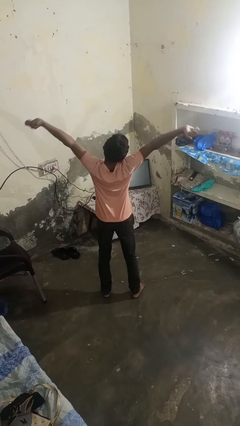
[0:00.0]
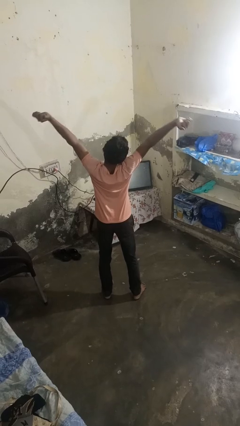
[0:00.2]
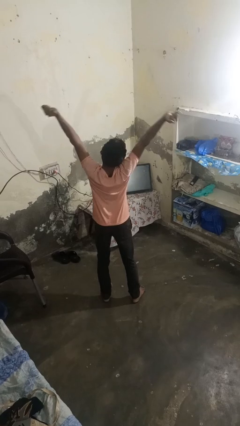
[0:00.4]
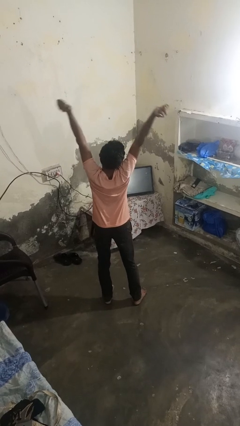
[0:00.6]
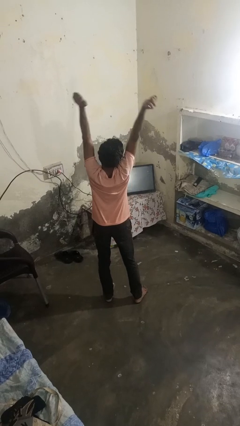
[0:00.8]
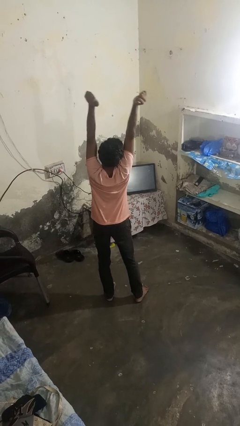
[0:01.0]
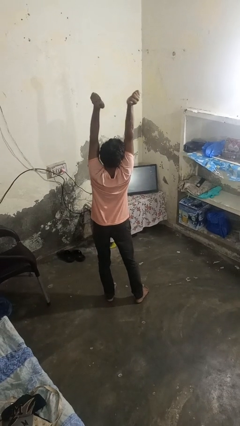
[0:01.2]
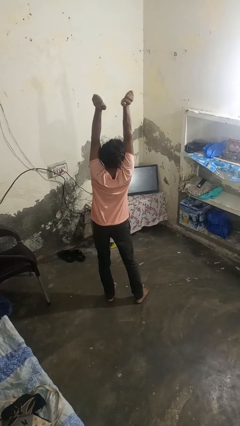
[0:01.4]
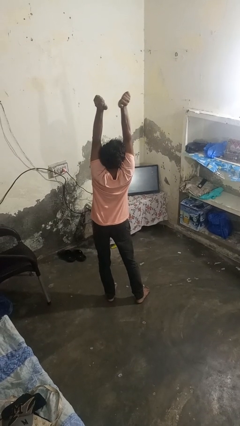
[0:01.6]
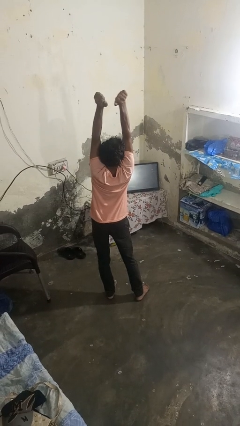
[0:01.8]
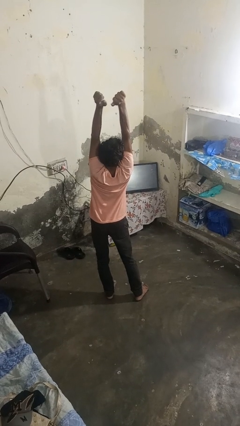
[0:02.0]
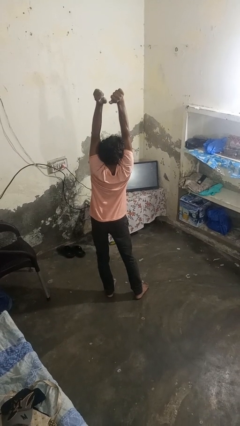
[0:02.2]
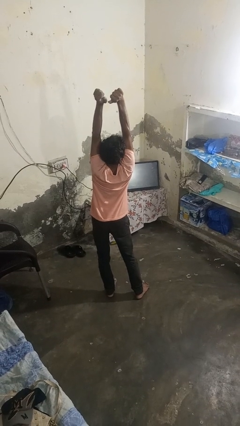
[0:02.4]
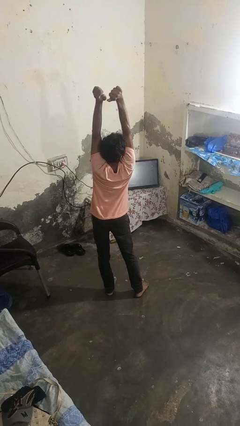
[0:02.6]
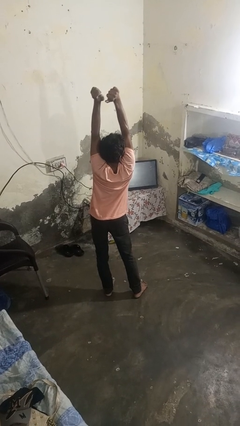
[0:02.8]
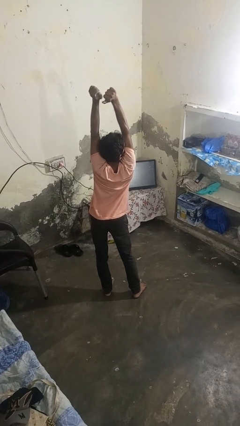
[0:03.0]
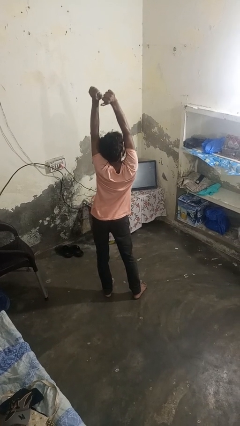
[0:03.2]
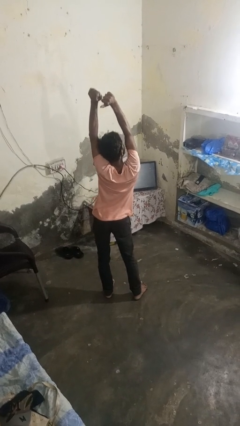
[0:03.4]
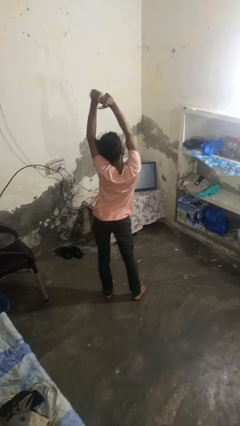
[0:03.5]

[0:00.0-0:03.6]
person stretches arms over head

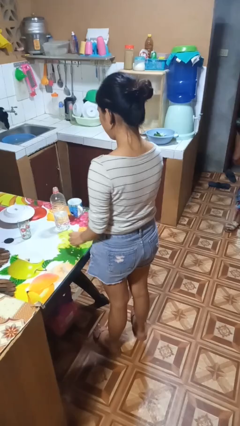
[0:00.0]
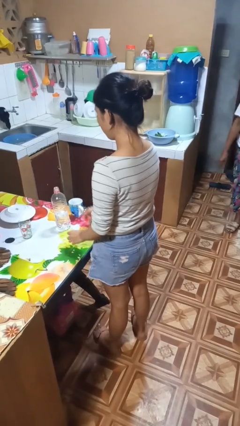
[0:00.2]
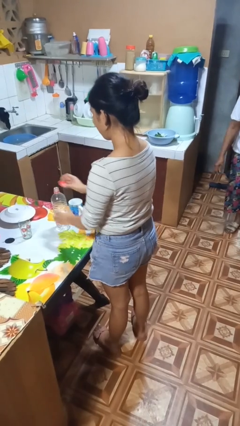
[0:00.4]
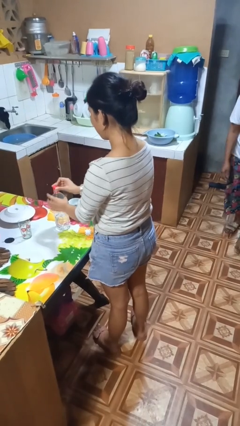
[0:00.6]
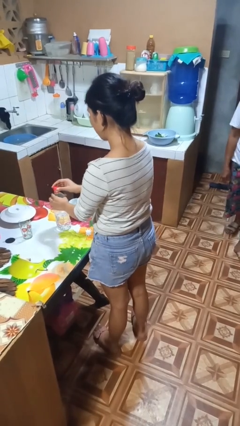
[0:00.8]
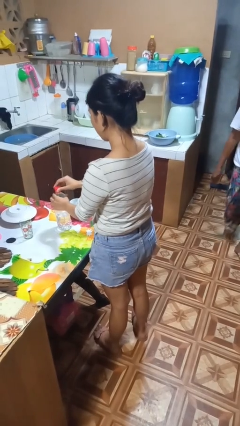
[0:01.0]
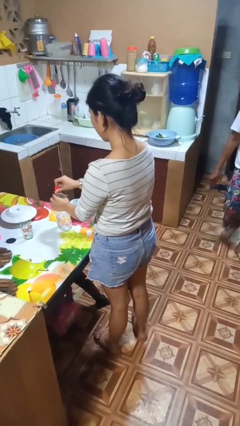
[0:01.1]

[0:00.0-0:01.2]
person screws lid to bottle

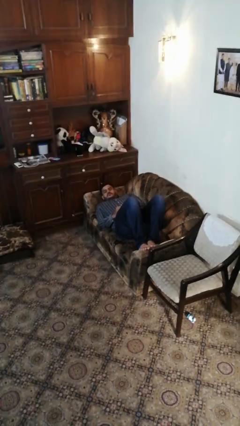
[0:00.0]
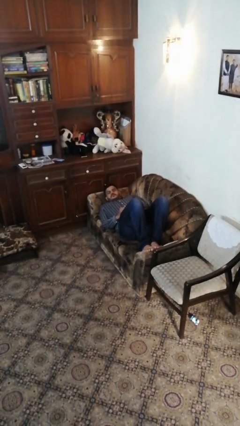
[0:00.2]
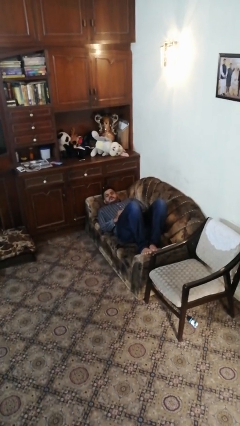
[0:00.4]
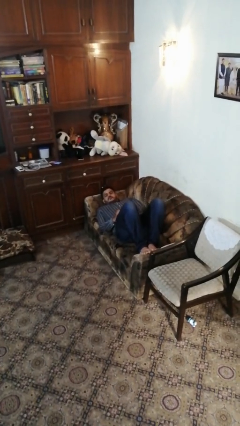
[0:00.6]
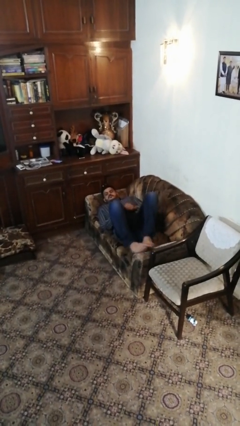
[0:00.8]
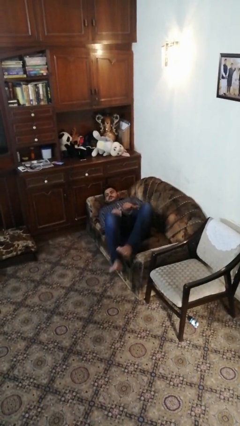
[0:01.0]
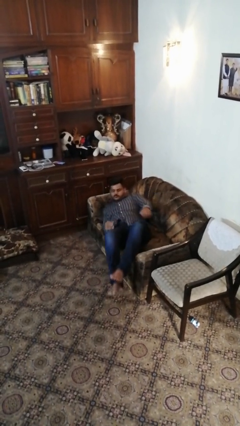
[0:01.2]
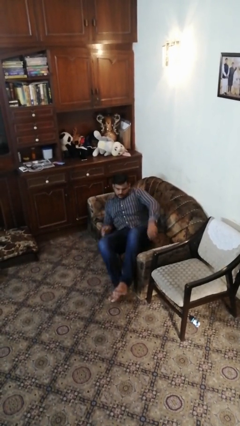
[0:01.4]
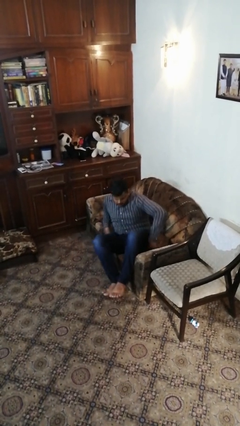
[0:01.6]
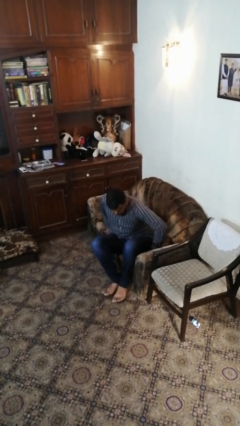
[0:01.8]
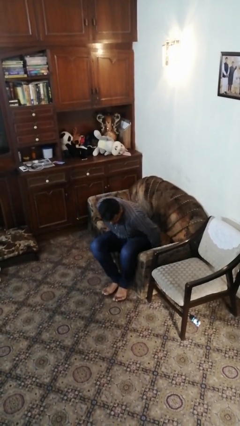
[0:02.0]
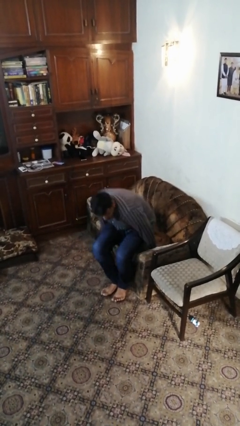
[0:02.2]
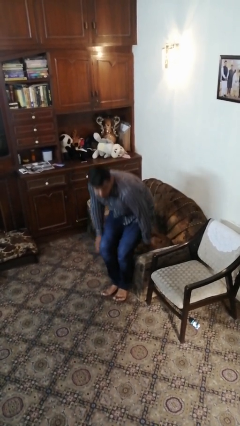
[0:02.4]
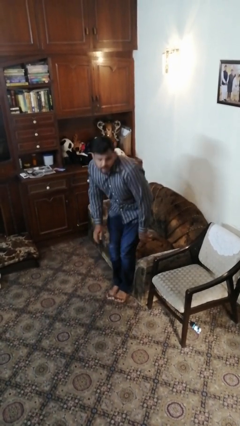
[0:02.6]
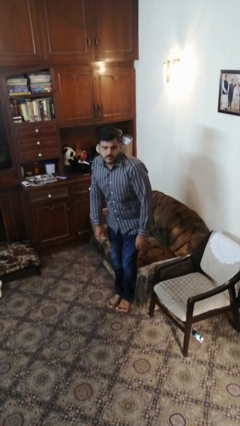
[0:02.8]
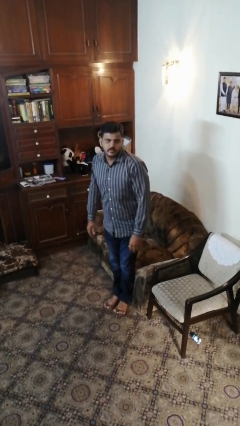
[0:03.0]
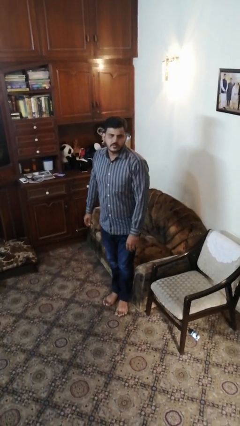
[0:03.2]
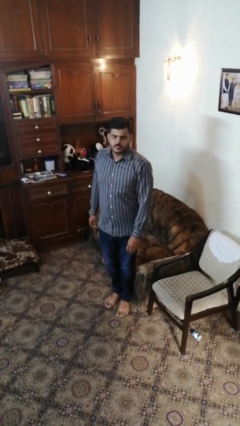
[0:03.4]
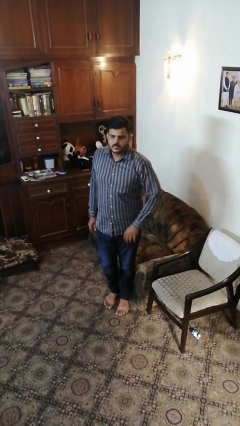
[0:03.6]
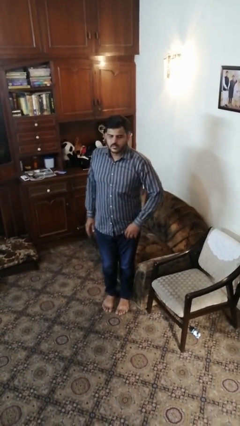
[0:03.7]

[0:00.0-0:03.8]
person stands up

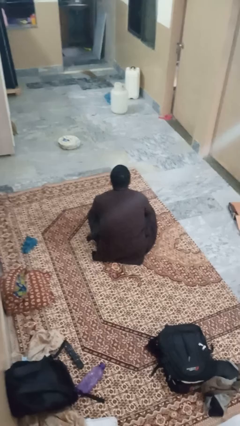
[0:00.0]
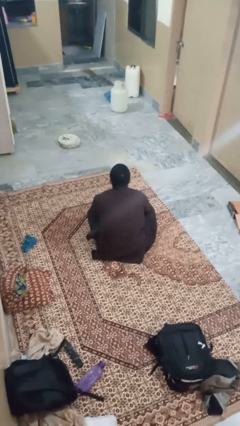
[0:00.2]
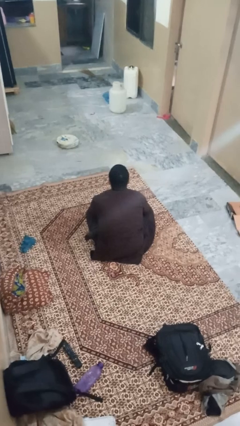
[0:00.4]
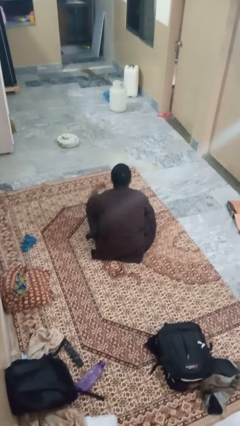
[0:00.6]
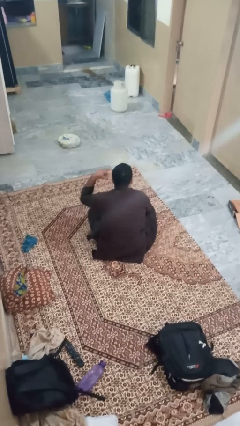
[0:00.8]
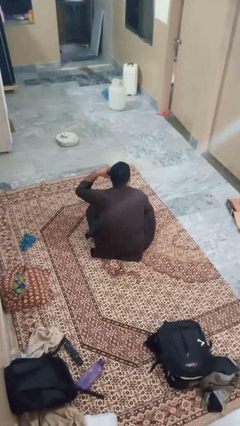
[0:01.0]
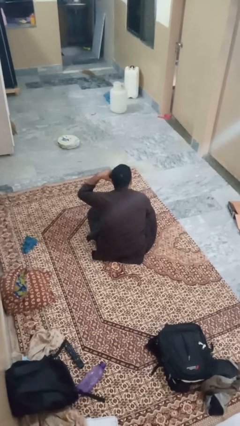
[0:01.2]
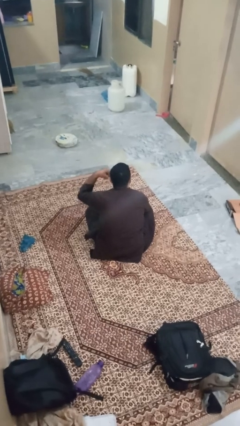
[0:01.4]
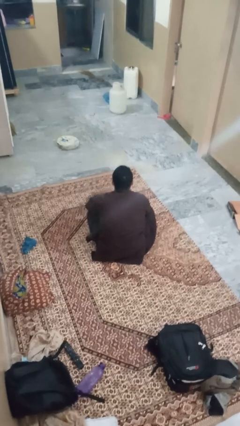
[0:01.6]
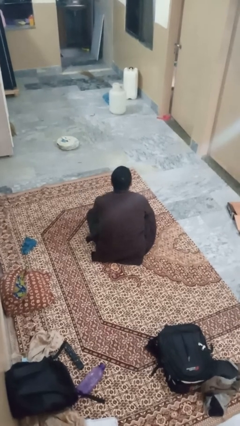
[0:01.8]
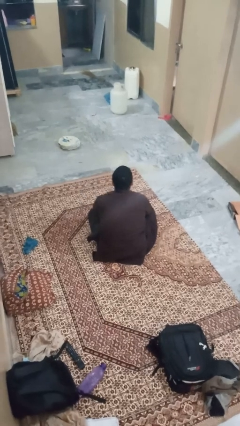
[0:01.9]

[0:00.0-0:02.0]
person gestures call me

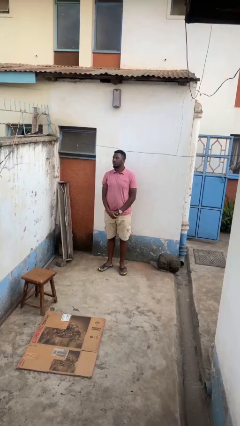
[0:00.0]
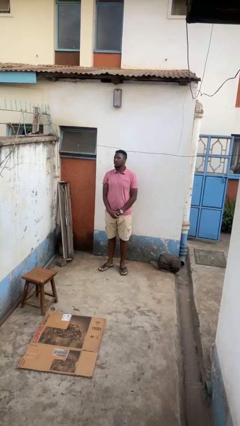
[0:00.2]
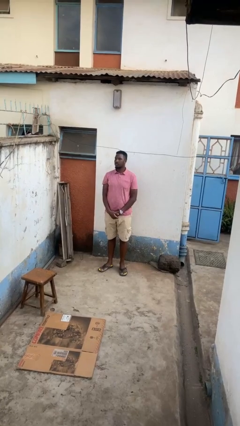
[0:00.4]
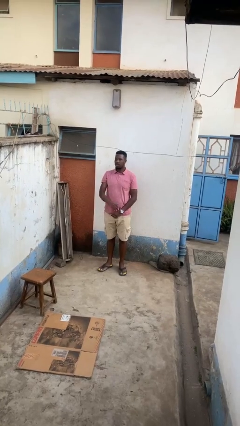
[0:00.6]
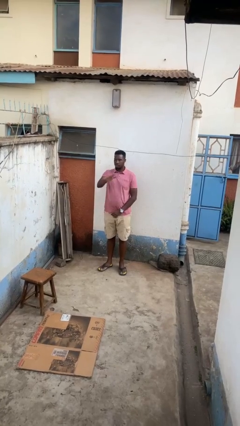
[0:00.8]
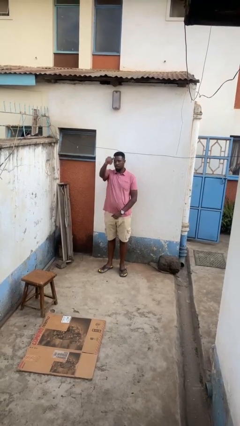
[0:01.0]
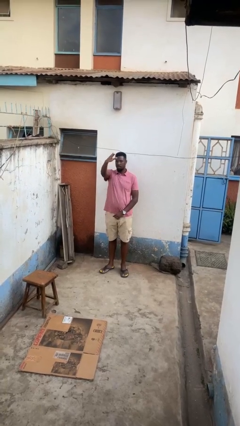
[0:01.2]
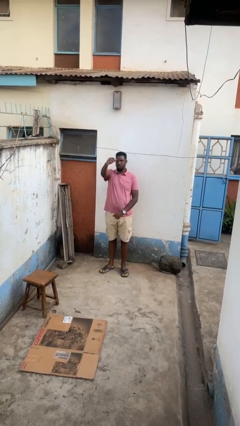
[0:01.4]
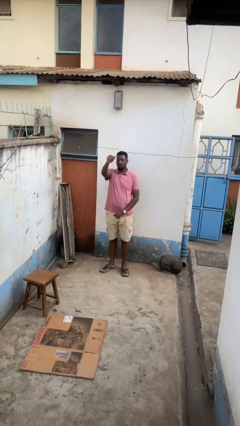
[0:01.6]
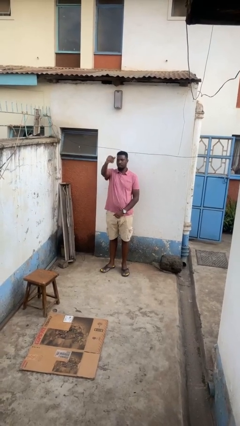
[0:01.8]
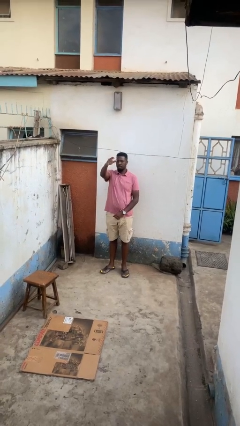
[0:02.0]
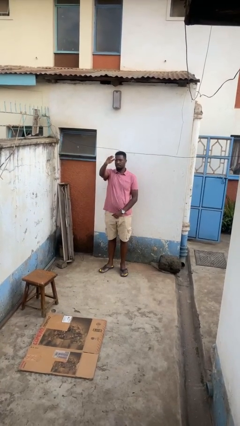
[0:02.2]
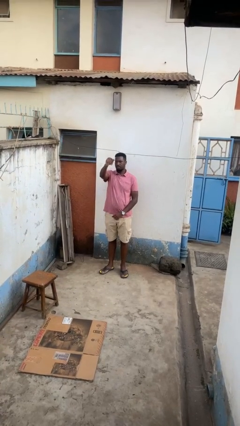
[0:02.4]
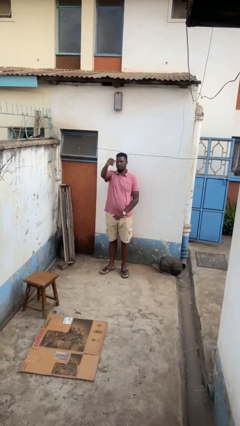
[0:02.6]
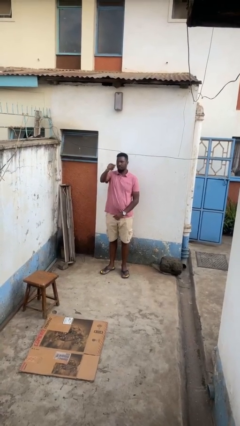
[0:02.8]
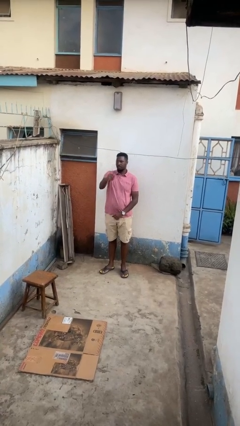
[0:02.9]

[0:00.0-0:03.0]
person gestures come here

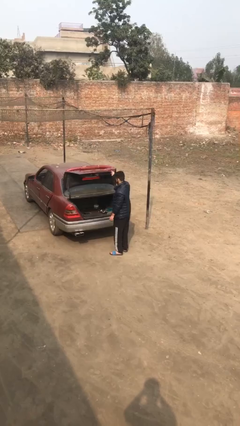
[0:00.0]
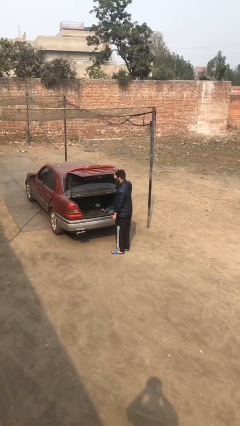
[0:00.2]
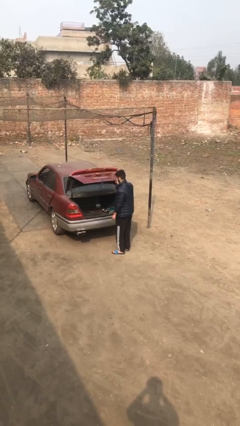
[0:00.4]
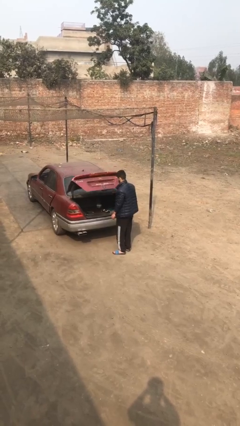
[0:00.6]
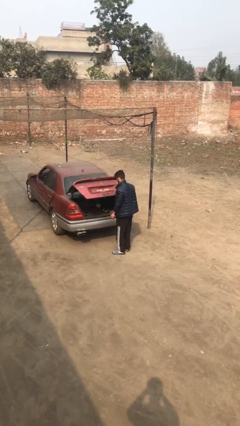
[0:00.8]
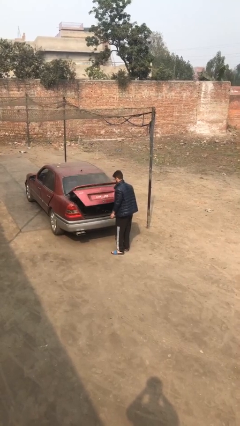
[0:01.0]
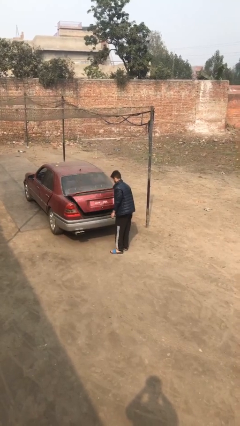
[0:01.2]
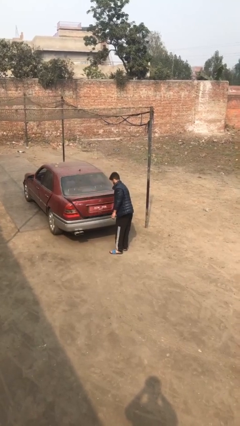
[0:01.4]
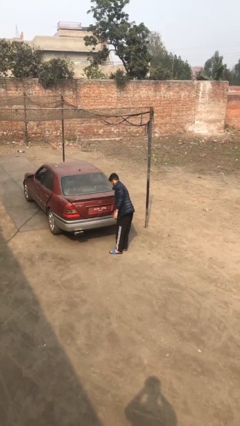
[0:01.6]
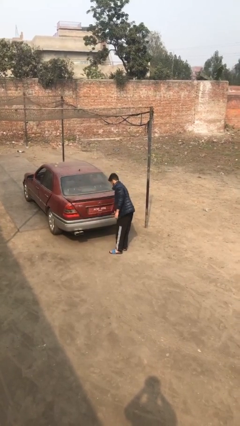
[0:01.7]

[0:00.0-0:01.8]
person closes car trunk

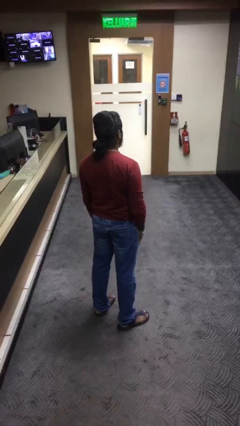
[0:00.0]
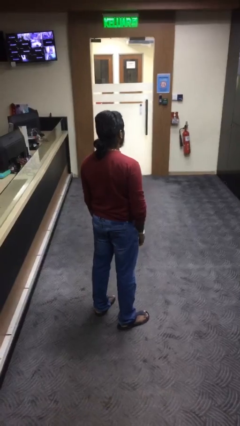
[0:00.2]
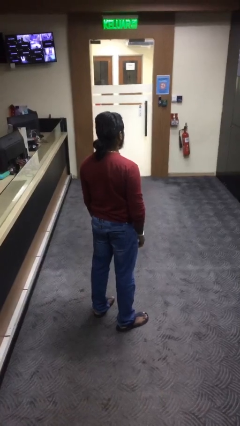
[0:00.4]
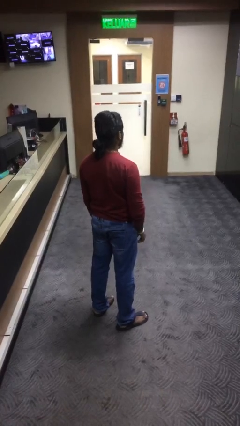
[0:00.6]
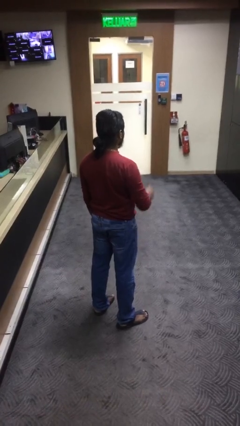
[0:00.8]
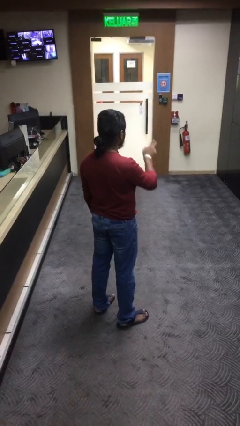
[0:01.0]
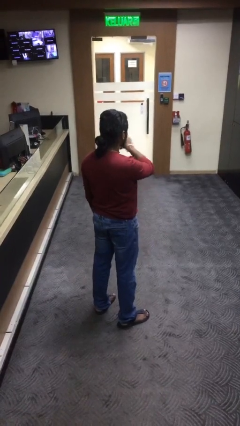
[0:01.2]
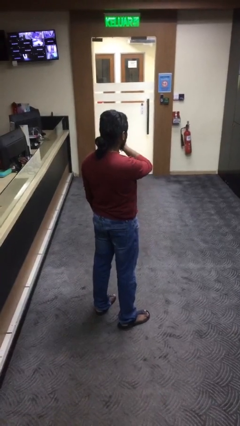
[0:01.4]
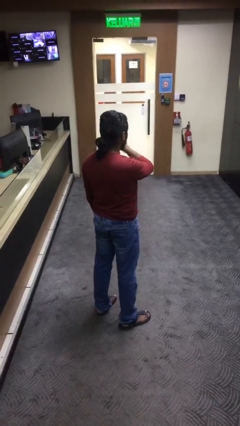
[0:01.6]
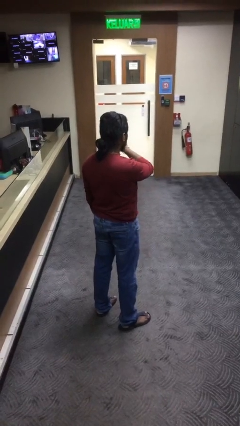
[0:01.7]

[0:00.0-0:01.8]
person gestures swipe left
